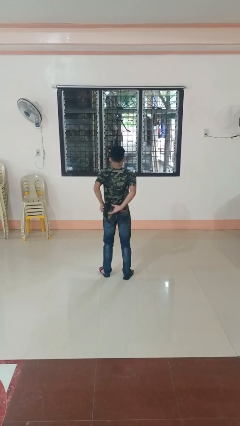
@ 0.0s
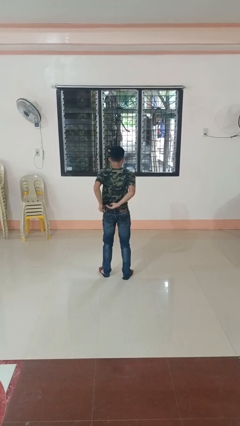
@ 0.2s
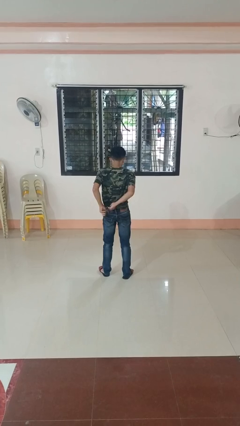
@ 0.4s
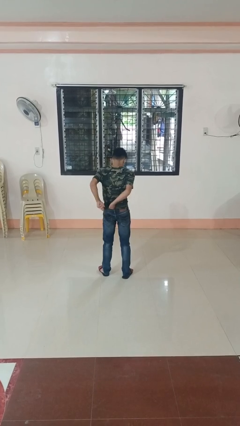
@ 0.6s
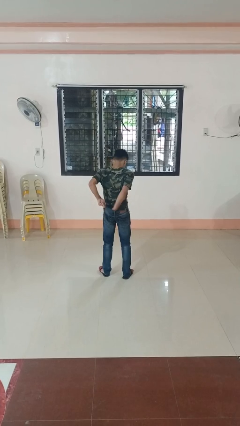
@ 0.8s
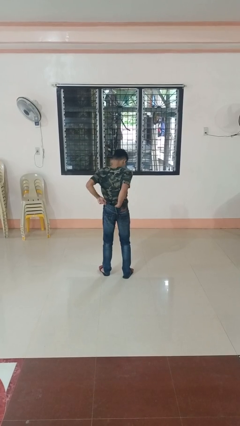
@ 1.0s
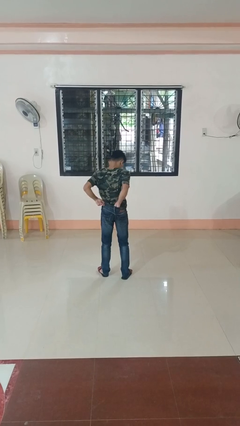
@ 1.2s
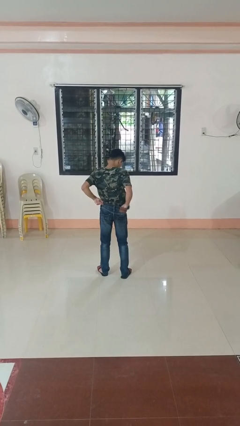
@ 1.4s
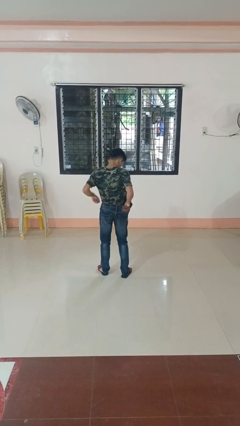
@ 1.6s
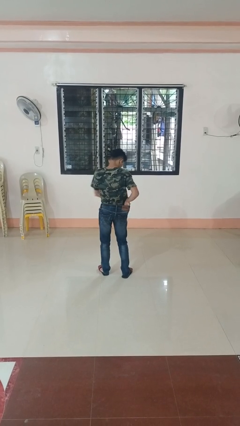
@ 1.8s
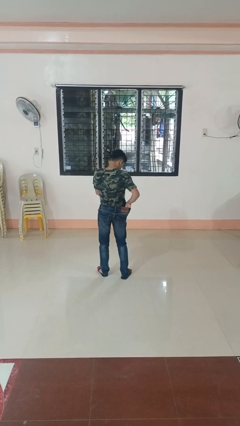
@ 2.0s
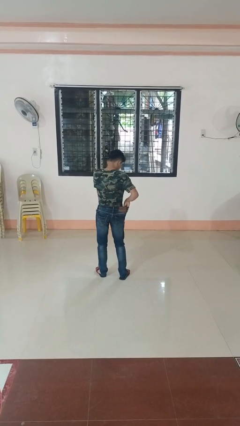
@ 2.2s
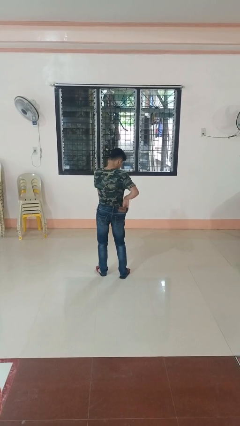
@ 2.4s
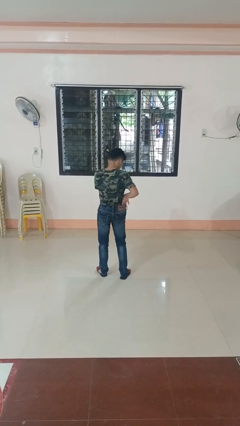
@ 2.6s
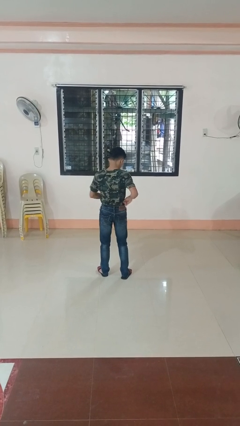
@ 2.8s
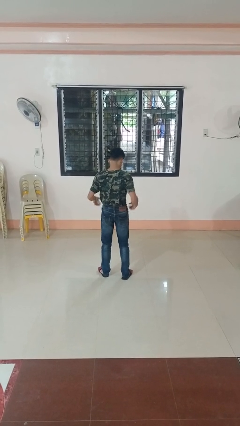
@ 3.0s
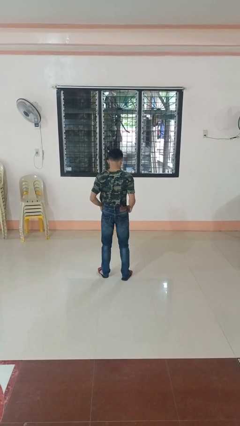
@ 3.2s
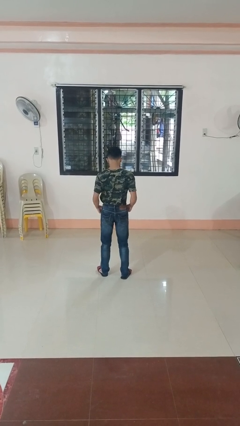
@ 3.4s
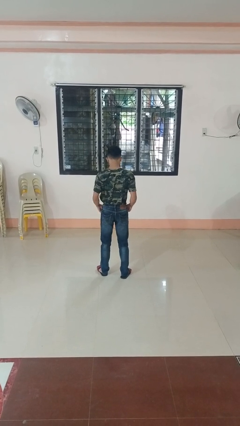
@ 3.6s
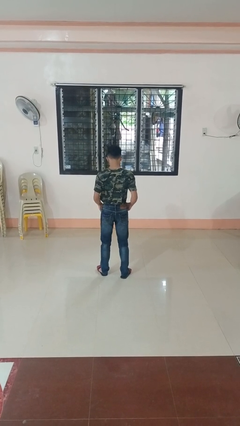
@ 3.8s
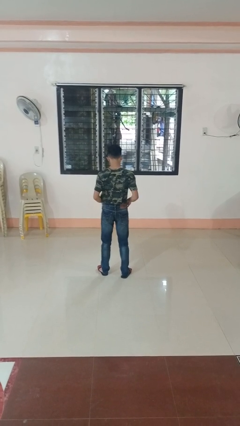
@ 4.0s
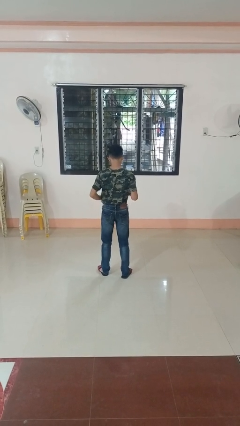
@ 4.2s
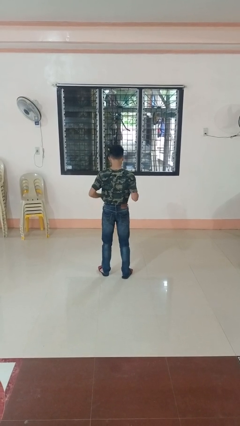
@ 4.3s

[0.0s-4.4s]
person tucks in shirt

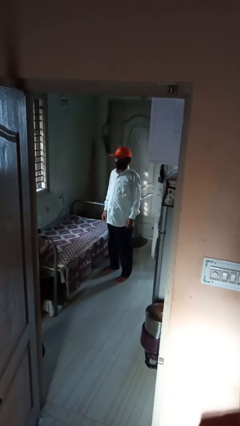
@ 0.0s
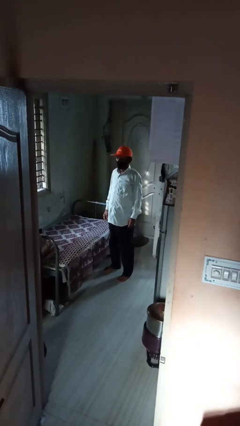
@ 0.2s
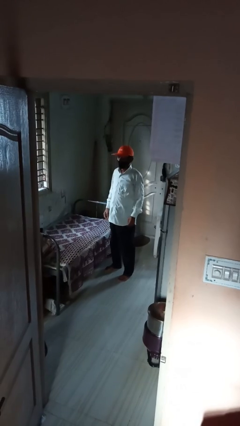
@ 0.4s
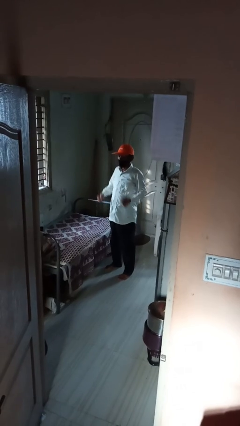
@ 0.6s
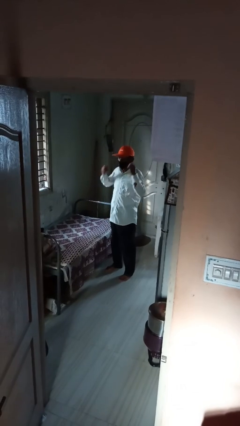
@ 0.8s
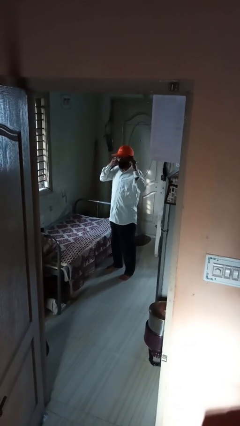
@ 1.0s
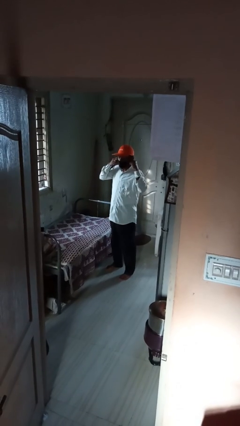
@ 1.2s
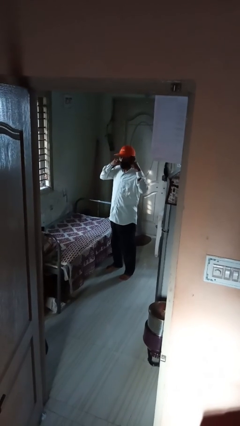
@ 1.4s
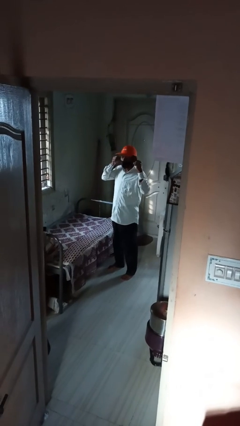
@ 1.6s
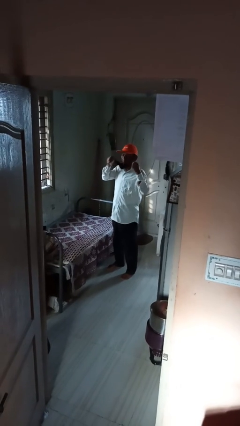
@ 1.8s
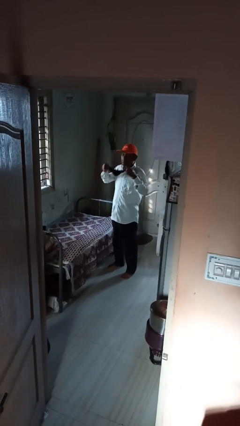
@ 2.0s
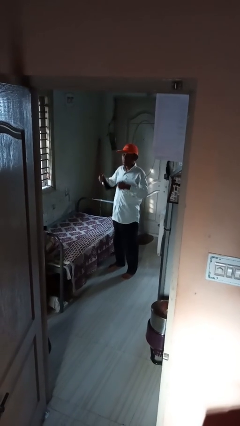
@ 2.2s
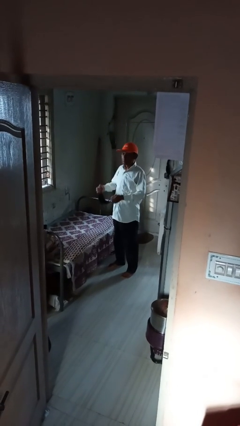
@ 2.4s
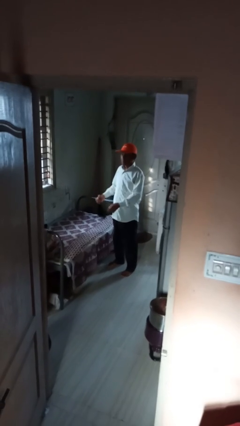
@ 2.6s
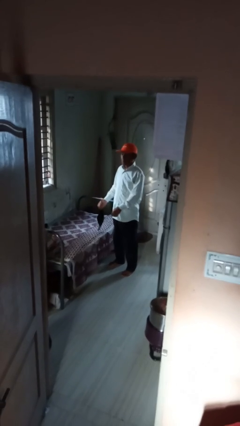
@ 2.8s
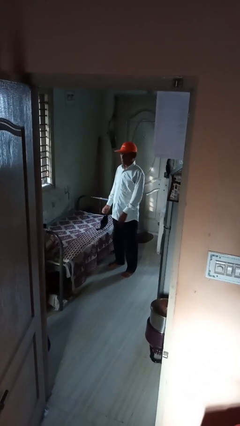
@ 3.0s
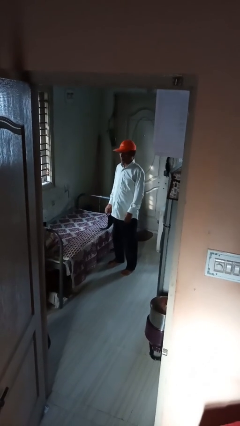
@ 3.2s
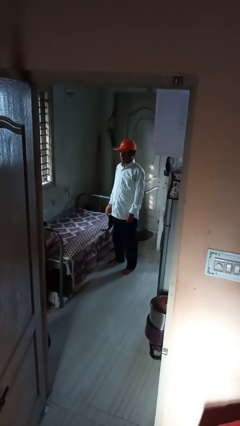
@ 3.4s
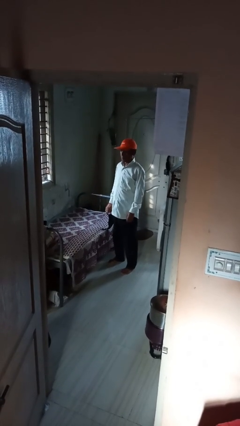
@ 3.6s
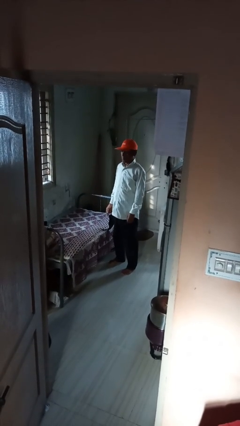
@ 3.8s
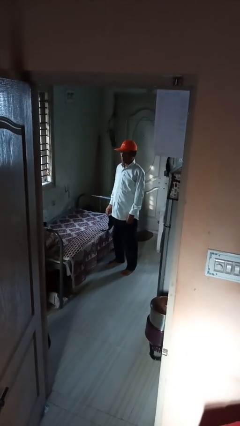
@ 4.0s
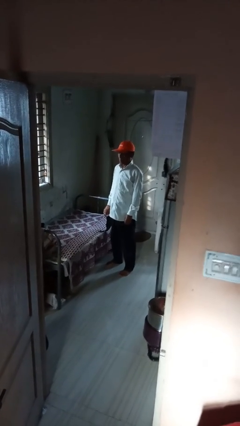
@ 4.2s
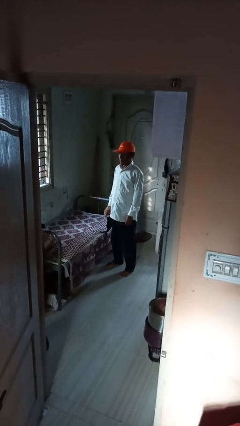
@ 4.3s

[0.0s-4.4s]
person takes off facemask

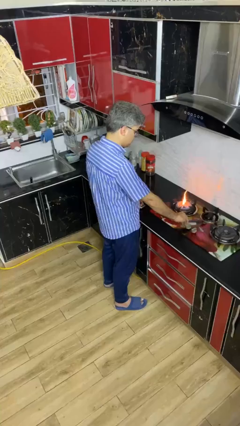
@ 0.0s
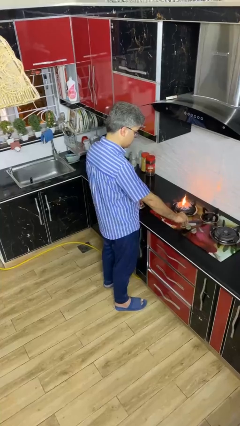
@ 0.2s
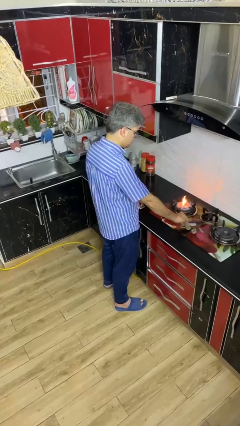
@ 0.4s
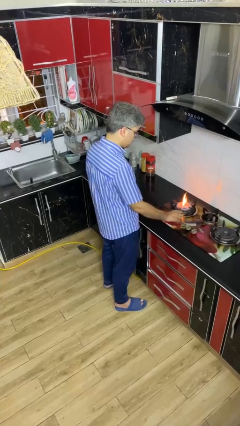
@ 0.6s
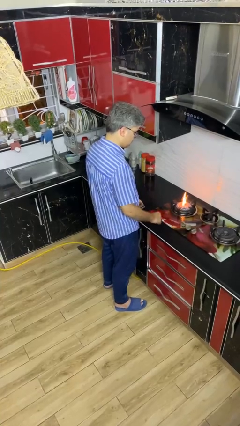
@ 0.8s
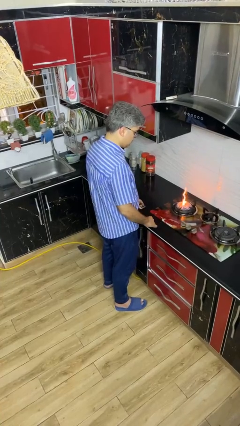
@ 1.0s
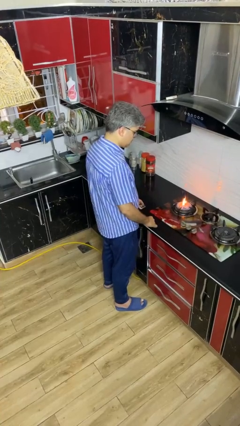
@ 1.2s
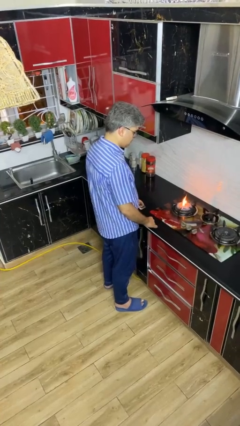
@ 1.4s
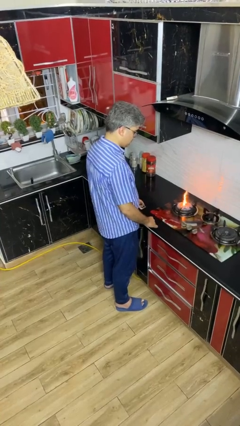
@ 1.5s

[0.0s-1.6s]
person turns on stovetop

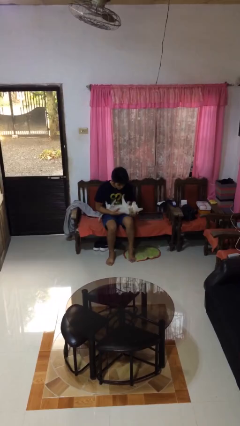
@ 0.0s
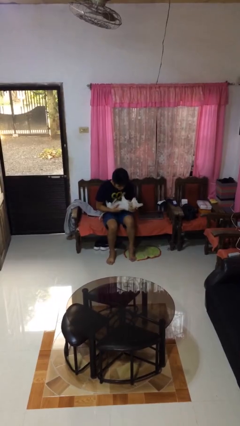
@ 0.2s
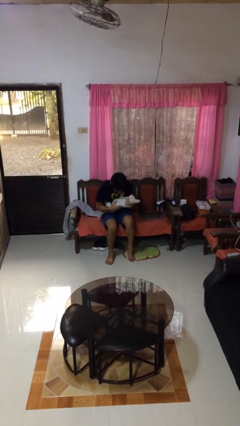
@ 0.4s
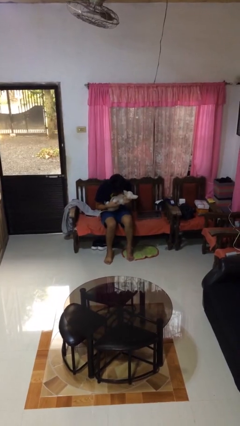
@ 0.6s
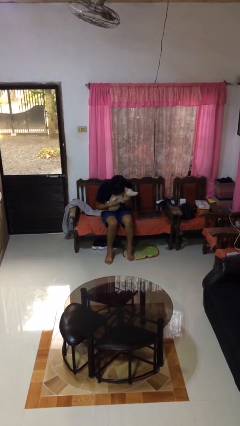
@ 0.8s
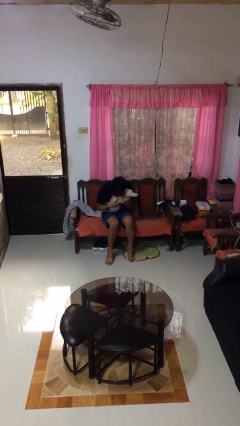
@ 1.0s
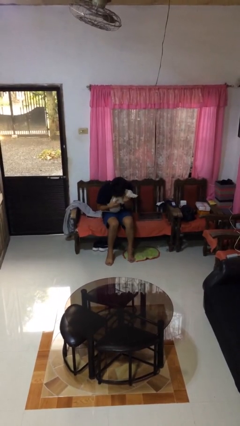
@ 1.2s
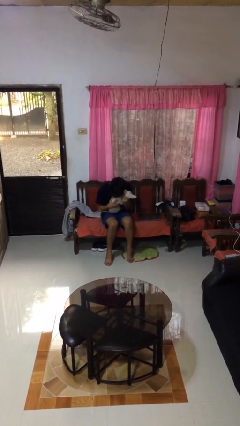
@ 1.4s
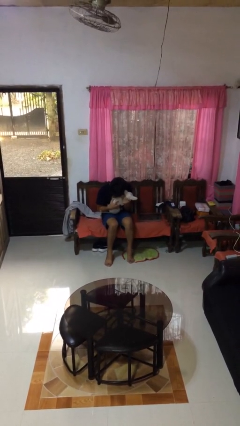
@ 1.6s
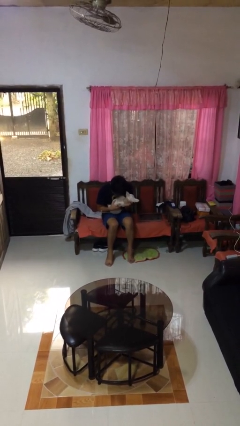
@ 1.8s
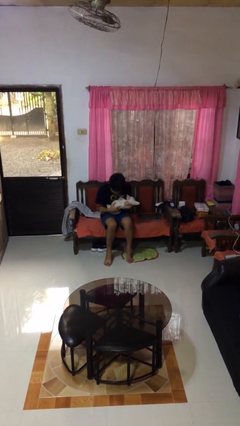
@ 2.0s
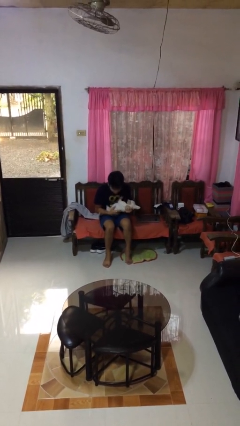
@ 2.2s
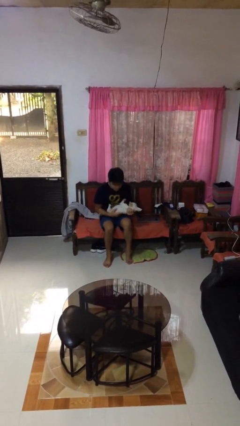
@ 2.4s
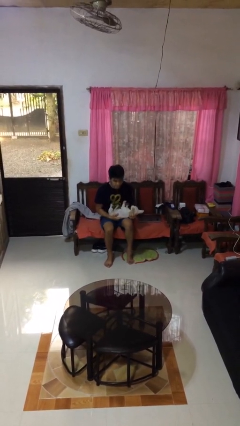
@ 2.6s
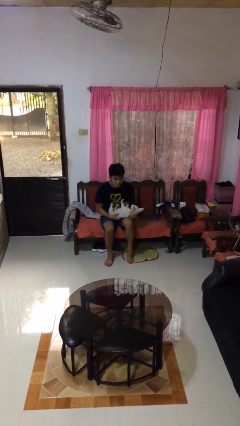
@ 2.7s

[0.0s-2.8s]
person hugs dog

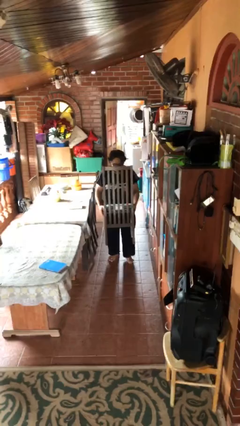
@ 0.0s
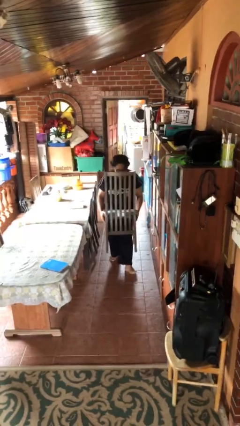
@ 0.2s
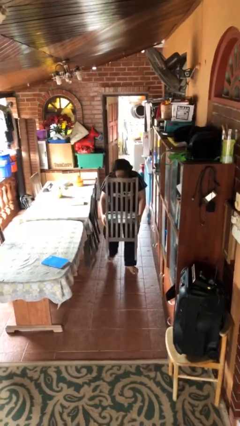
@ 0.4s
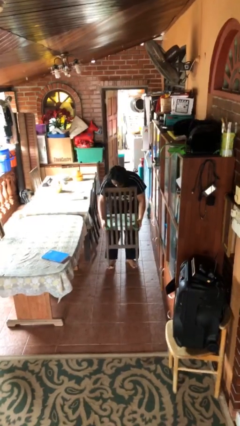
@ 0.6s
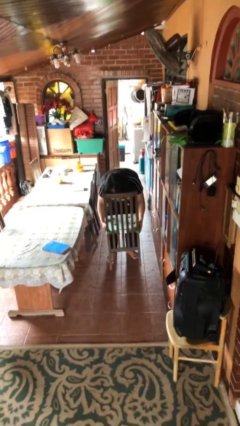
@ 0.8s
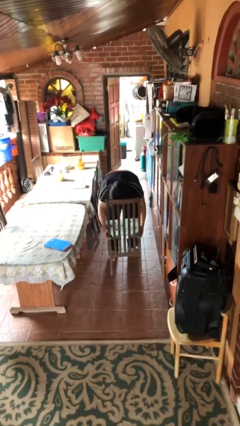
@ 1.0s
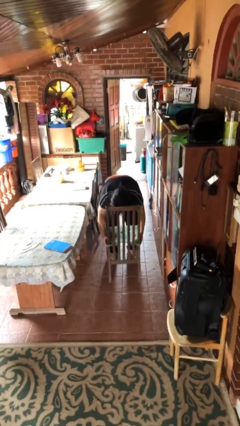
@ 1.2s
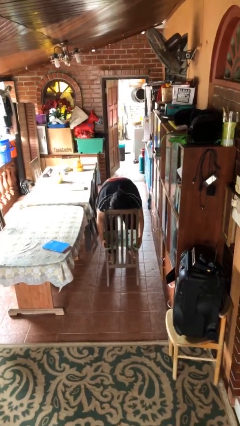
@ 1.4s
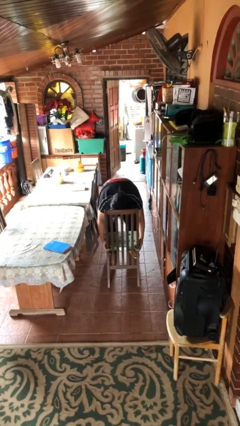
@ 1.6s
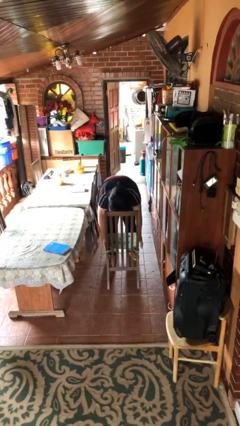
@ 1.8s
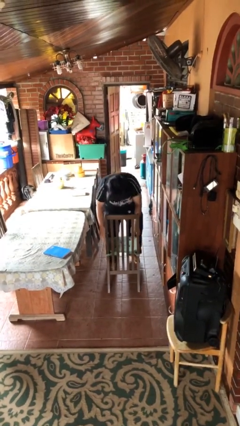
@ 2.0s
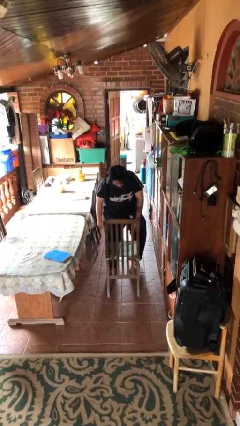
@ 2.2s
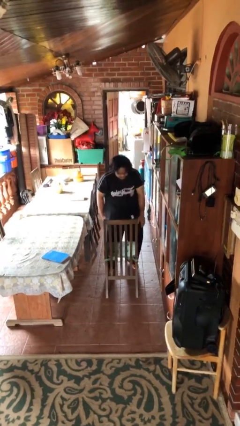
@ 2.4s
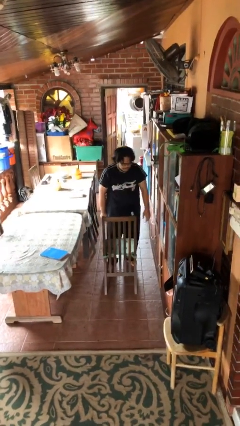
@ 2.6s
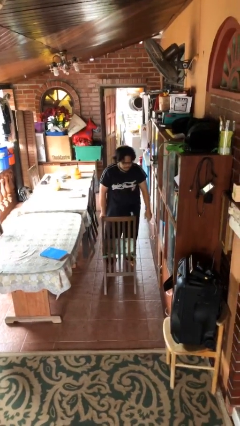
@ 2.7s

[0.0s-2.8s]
person puts down object on floor

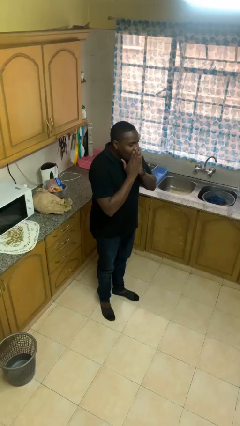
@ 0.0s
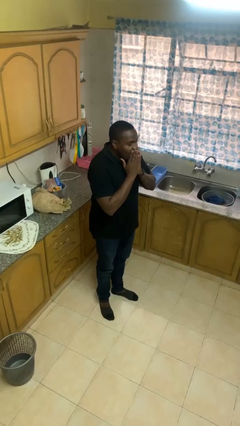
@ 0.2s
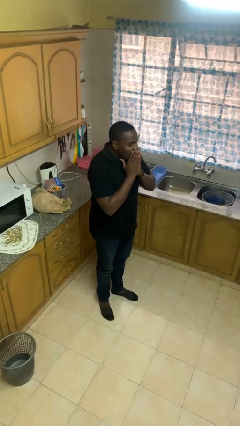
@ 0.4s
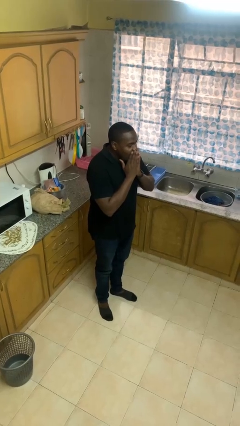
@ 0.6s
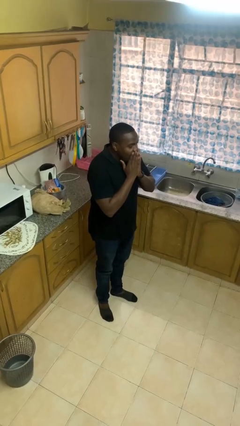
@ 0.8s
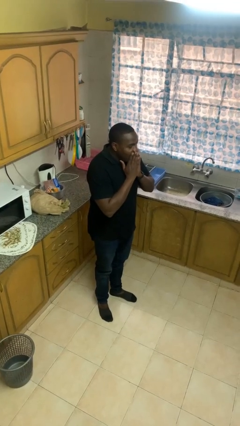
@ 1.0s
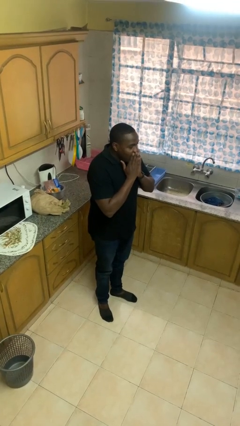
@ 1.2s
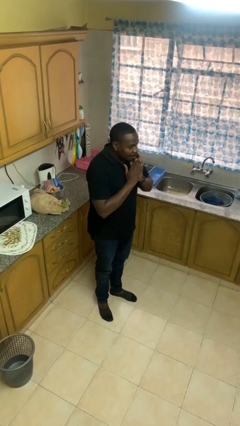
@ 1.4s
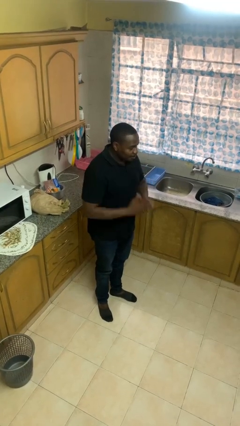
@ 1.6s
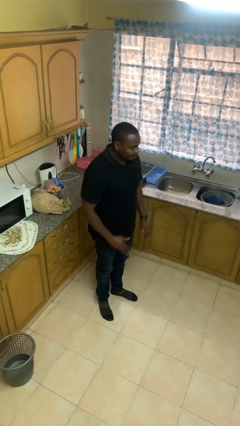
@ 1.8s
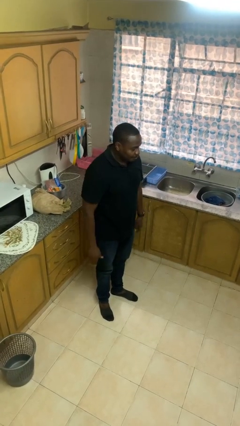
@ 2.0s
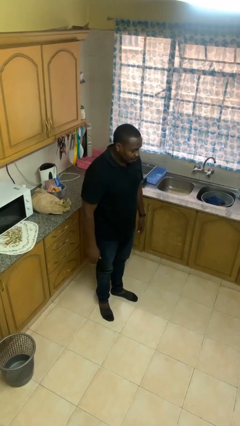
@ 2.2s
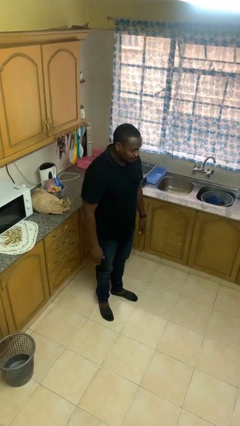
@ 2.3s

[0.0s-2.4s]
person yawns
